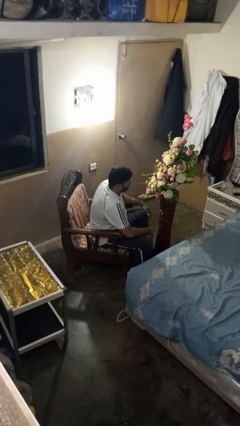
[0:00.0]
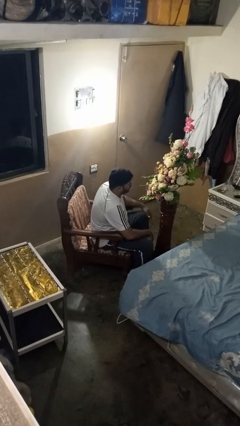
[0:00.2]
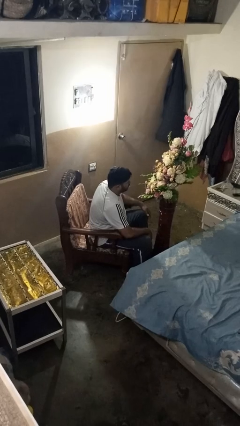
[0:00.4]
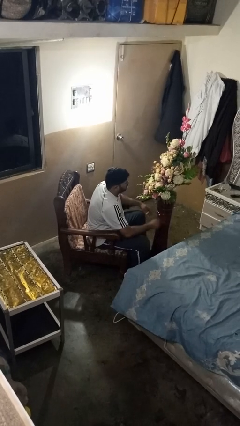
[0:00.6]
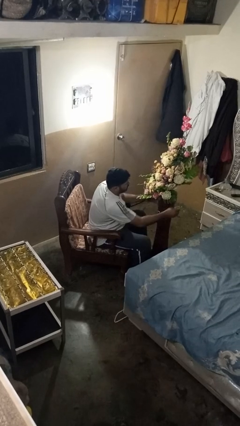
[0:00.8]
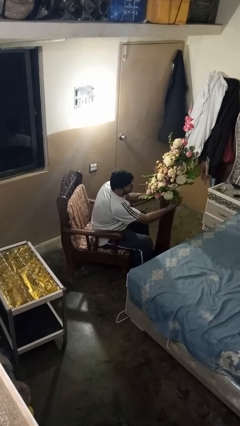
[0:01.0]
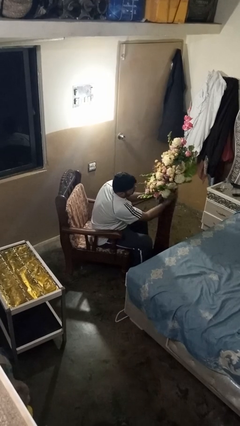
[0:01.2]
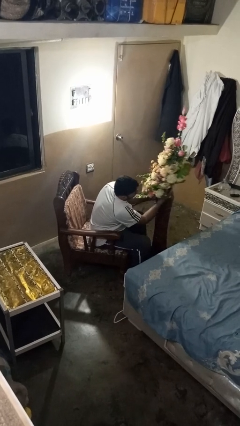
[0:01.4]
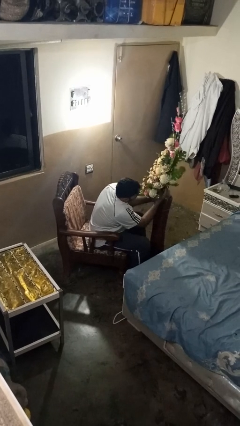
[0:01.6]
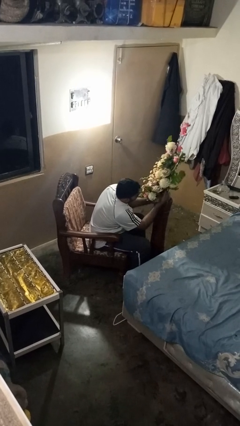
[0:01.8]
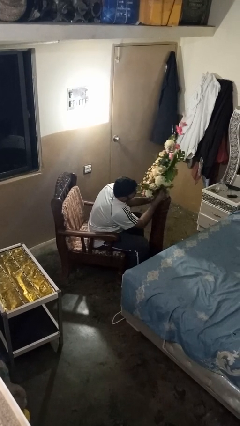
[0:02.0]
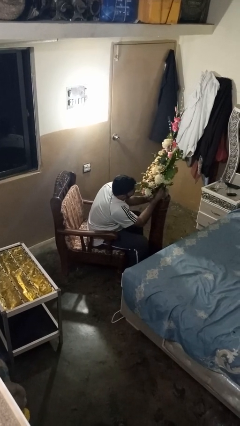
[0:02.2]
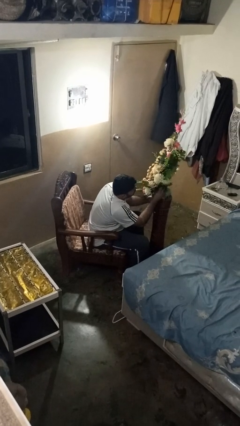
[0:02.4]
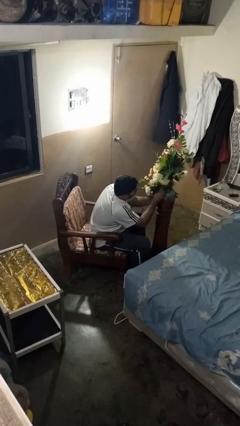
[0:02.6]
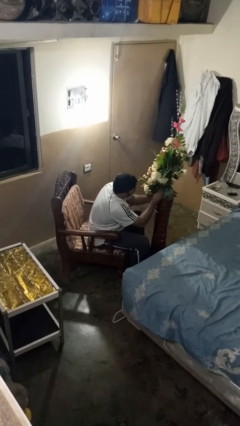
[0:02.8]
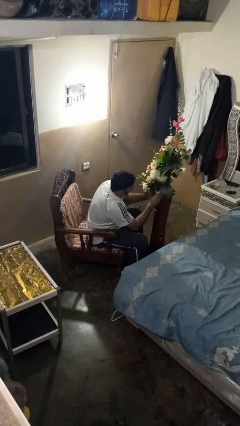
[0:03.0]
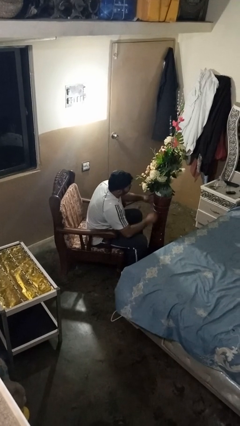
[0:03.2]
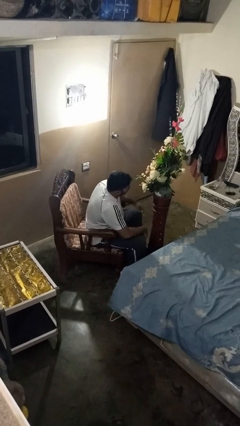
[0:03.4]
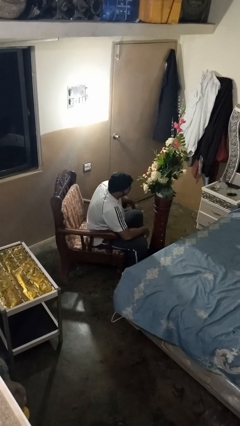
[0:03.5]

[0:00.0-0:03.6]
person arranges flowers in vase

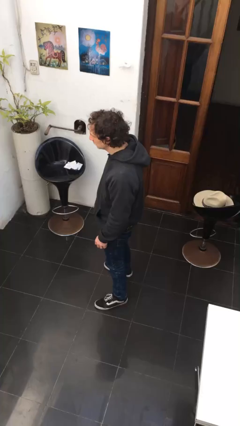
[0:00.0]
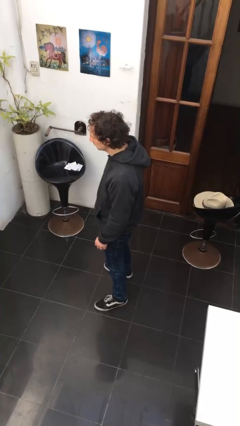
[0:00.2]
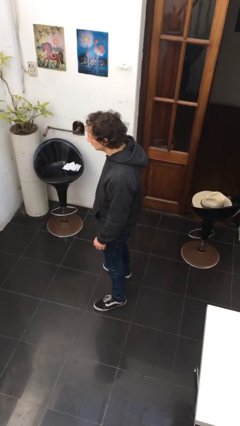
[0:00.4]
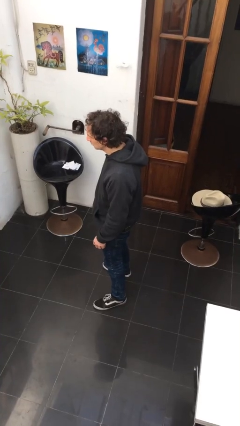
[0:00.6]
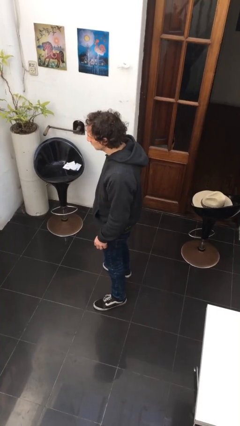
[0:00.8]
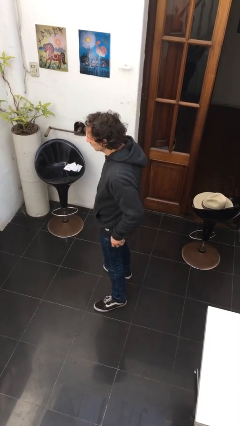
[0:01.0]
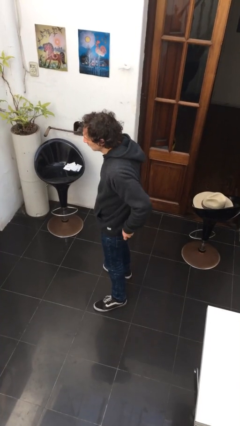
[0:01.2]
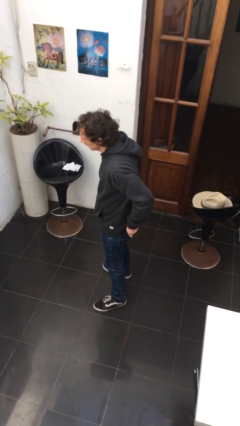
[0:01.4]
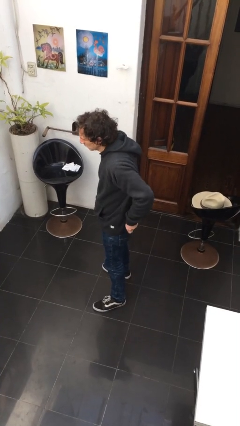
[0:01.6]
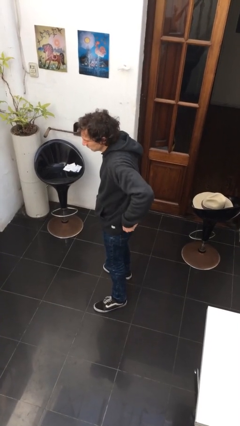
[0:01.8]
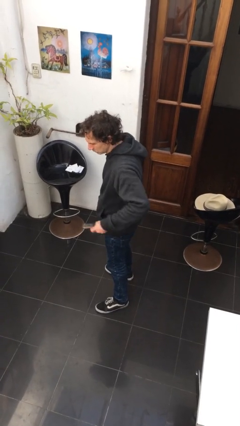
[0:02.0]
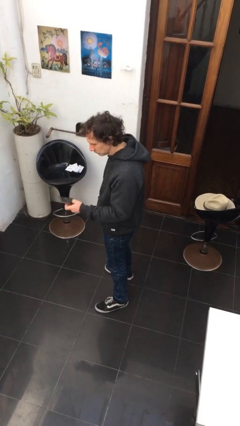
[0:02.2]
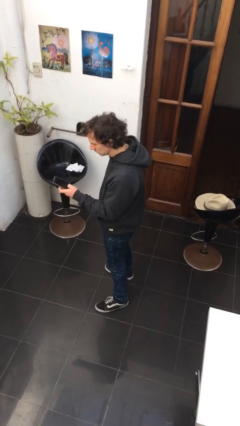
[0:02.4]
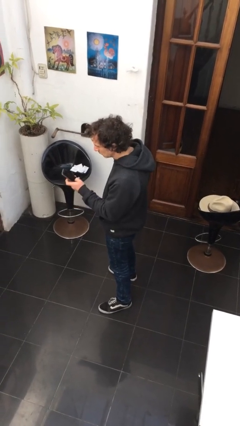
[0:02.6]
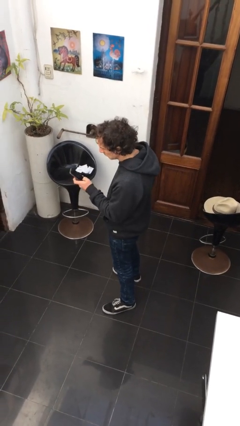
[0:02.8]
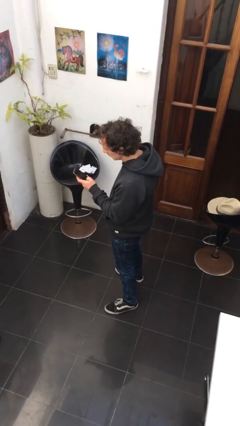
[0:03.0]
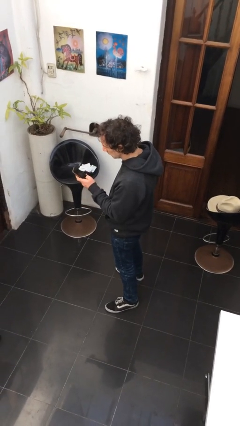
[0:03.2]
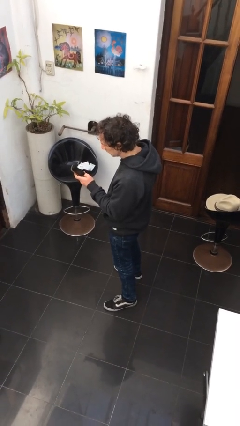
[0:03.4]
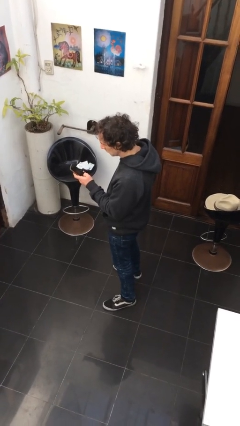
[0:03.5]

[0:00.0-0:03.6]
person takes phone from pocket

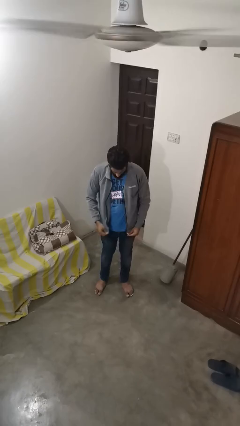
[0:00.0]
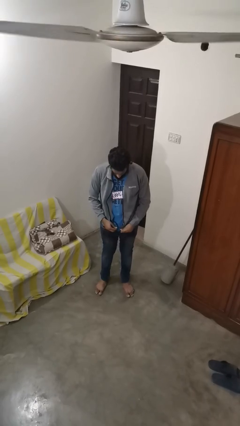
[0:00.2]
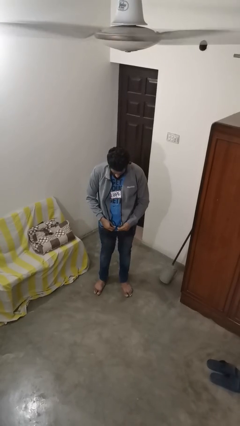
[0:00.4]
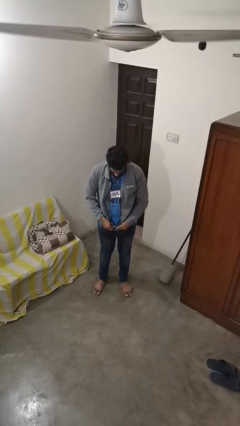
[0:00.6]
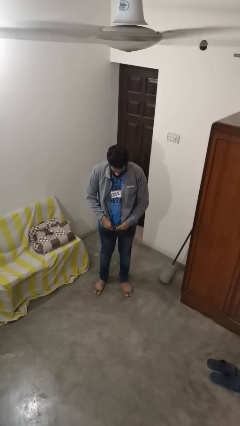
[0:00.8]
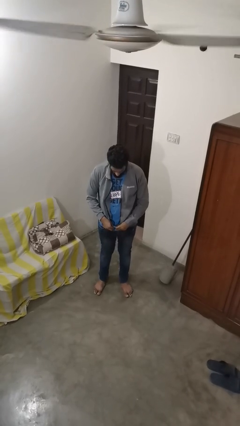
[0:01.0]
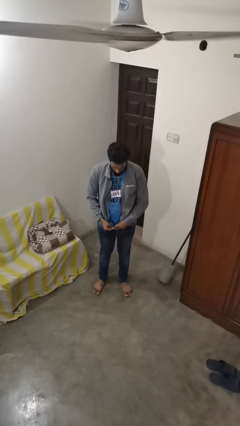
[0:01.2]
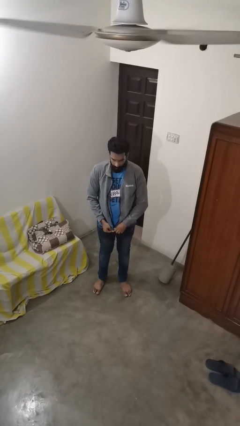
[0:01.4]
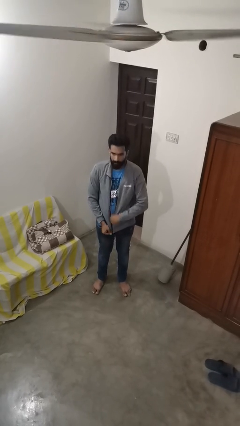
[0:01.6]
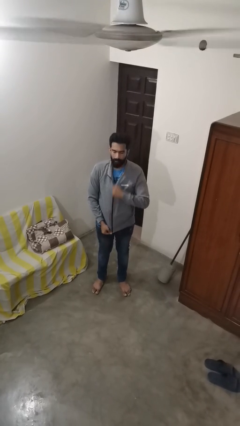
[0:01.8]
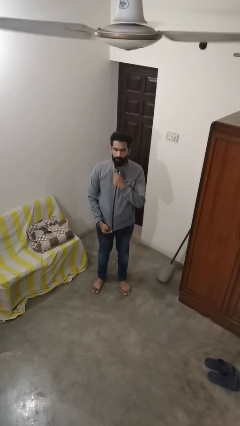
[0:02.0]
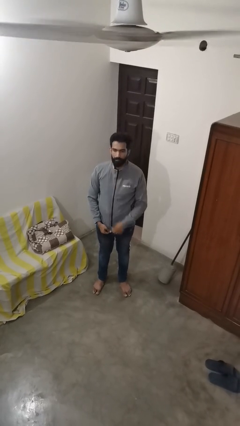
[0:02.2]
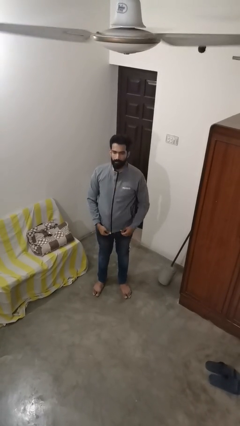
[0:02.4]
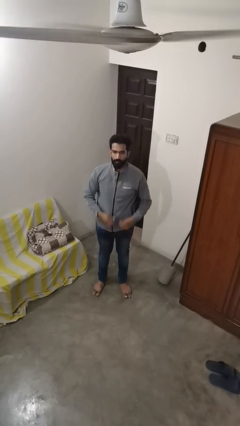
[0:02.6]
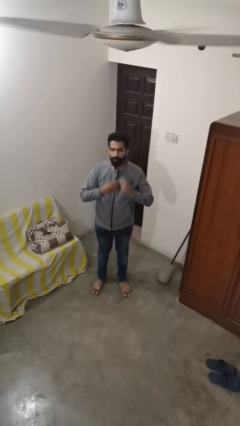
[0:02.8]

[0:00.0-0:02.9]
person zips up jacket

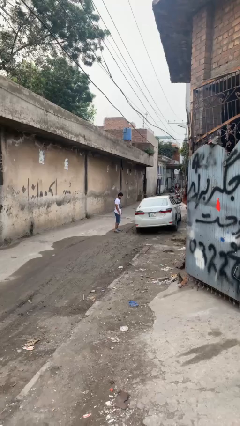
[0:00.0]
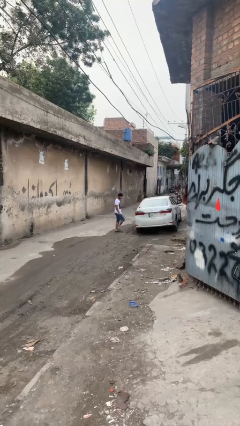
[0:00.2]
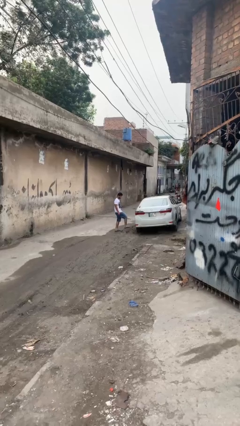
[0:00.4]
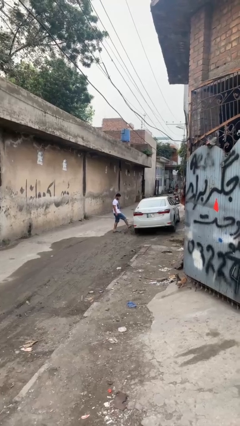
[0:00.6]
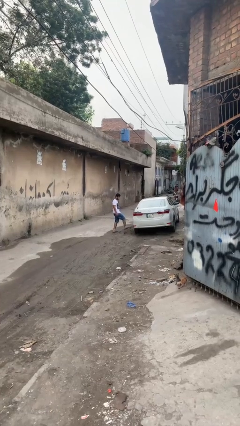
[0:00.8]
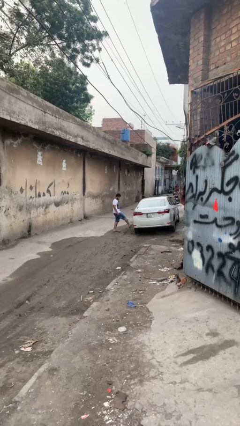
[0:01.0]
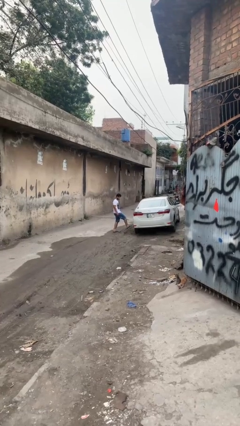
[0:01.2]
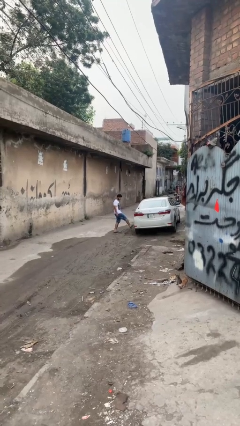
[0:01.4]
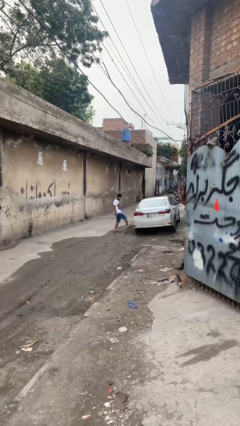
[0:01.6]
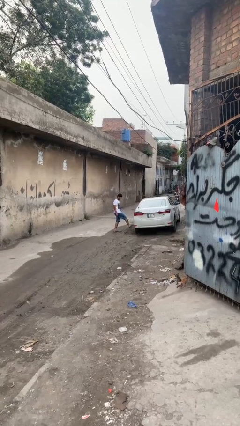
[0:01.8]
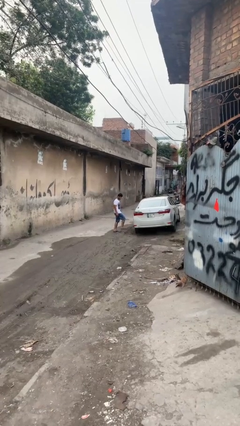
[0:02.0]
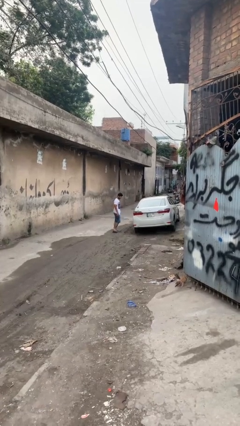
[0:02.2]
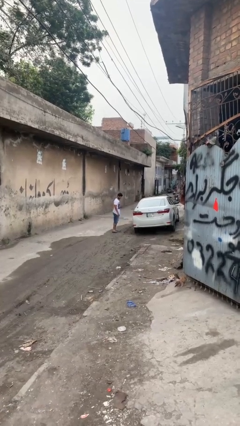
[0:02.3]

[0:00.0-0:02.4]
person kicks car tires

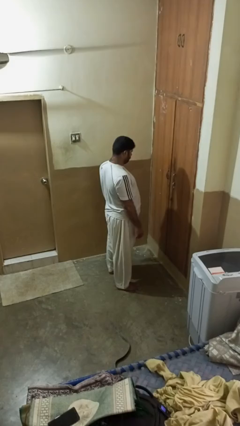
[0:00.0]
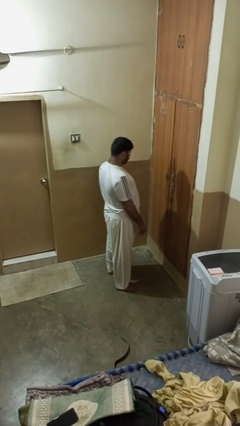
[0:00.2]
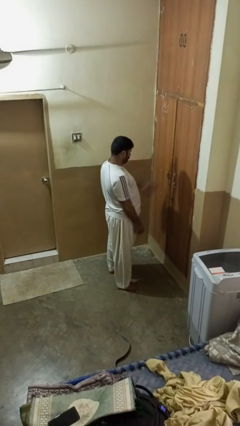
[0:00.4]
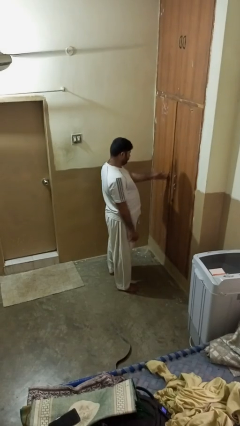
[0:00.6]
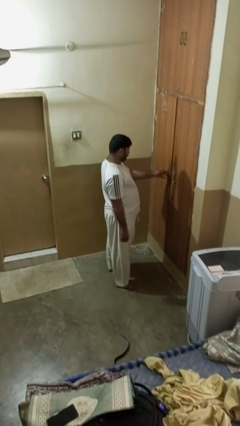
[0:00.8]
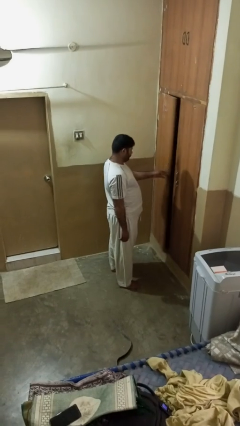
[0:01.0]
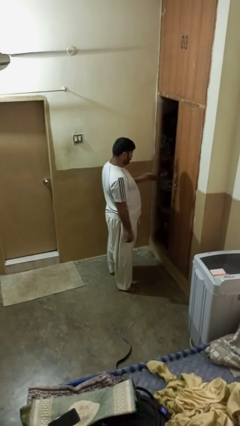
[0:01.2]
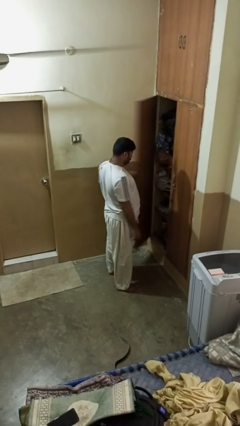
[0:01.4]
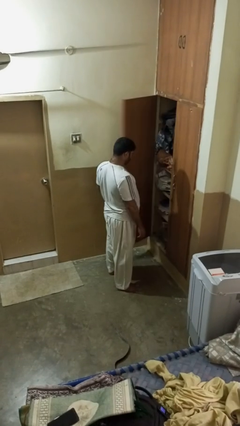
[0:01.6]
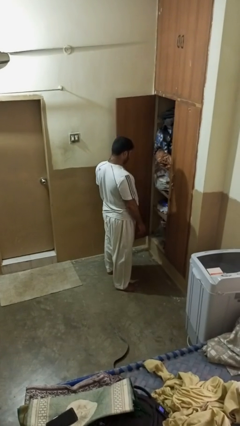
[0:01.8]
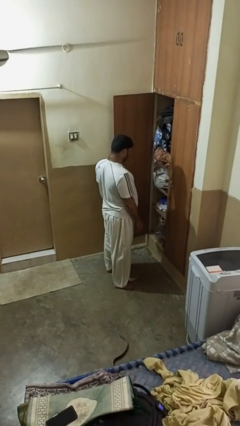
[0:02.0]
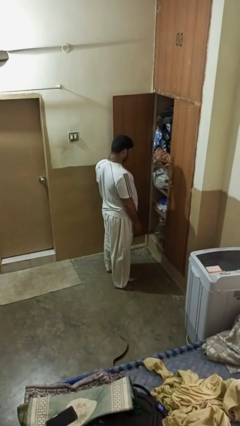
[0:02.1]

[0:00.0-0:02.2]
person opens closet door

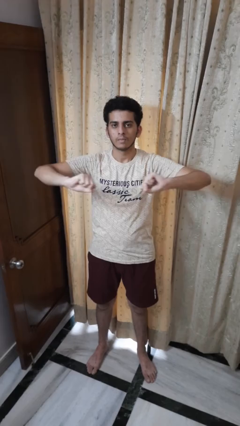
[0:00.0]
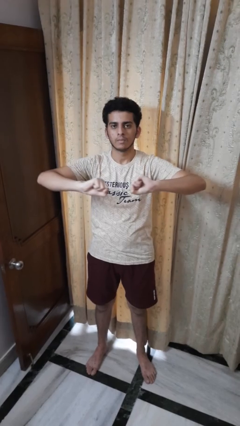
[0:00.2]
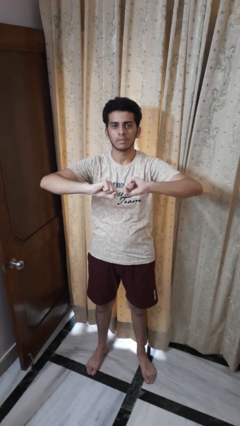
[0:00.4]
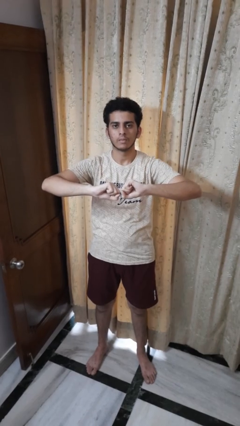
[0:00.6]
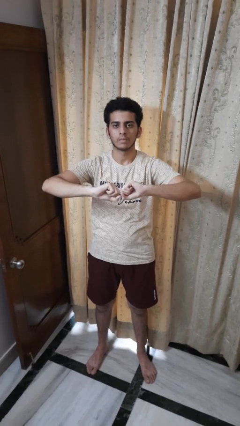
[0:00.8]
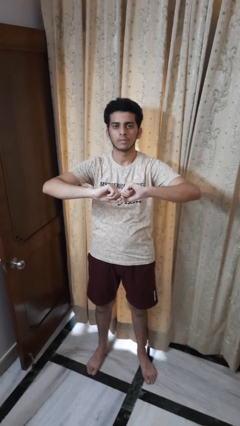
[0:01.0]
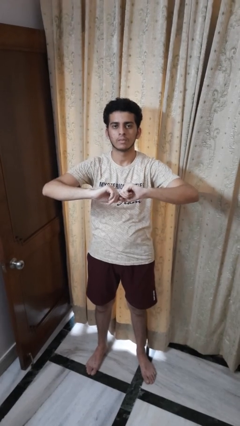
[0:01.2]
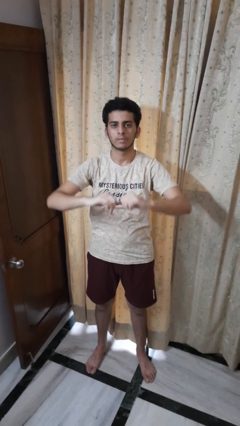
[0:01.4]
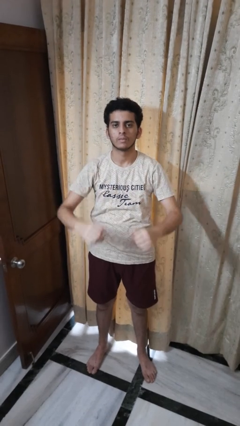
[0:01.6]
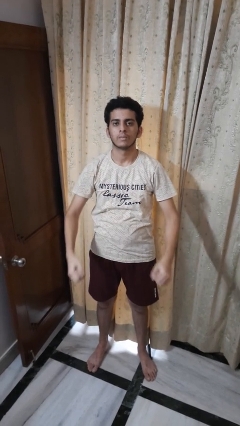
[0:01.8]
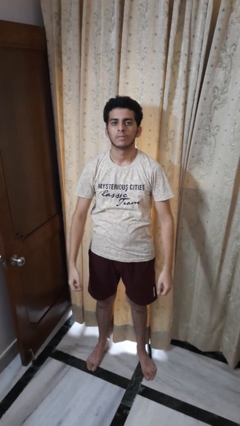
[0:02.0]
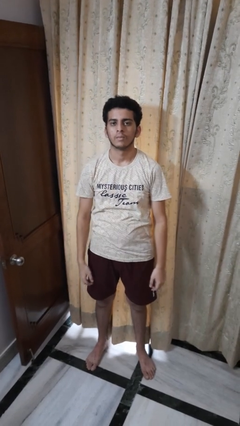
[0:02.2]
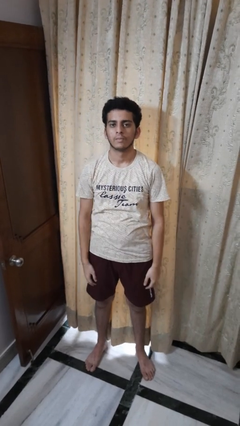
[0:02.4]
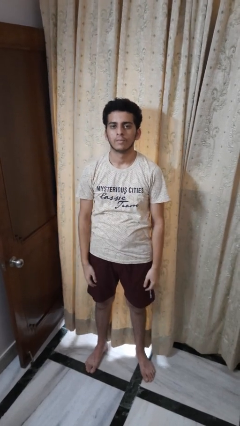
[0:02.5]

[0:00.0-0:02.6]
person gestures zoom out
